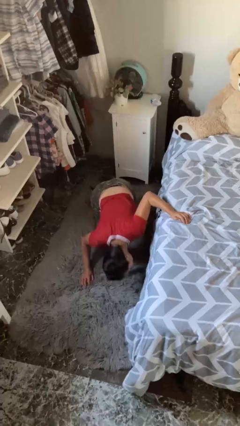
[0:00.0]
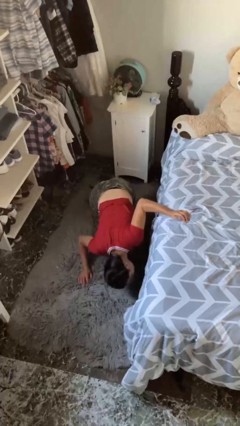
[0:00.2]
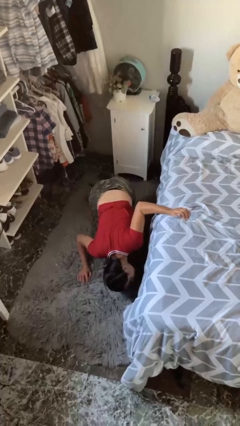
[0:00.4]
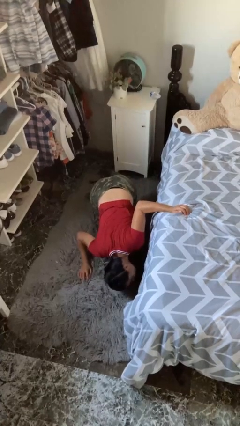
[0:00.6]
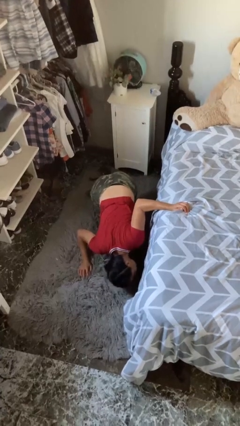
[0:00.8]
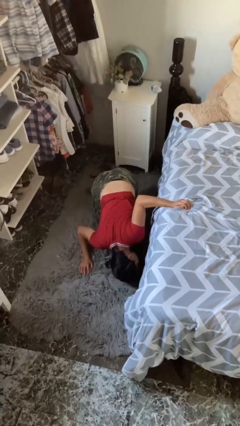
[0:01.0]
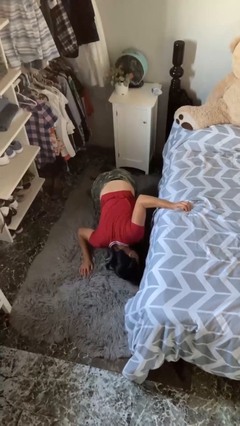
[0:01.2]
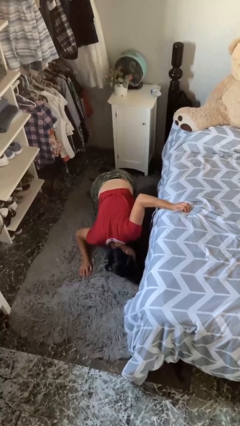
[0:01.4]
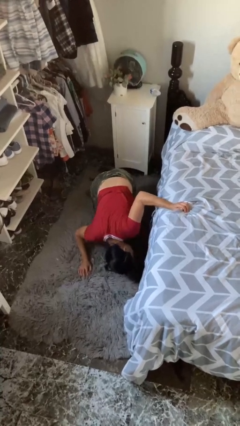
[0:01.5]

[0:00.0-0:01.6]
person searches under bed

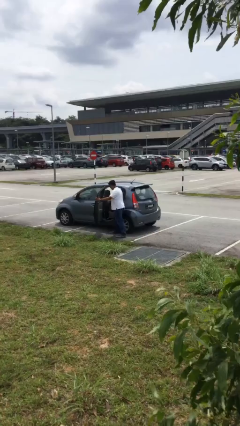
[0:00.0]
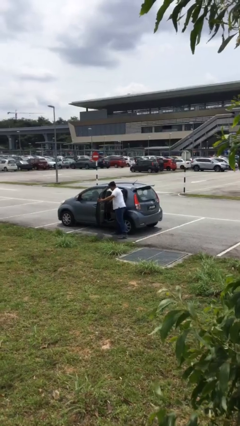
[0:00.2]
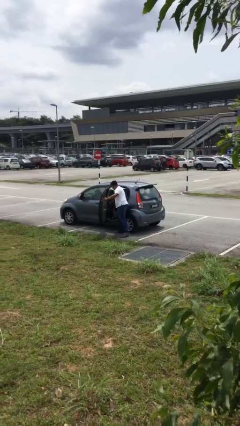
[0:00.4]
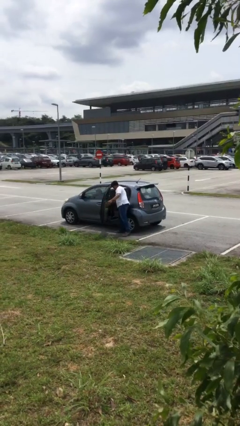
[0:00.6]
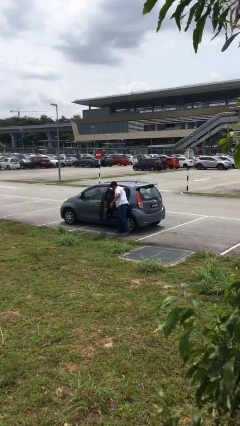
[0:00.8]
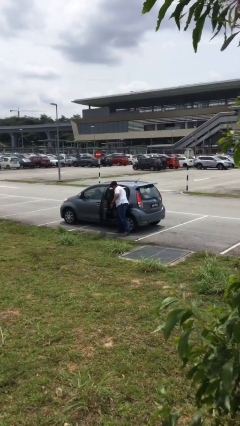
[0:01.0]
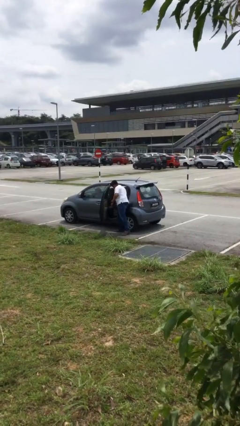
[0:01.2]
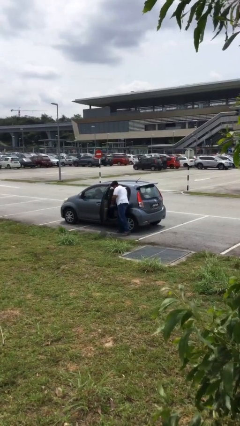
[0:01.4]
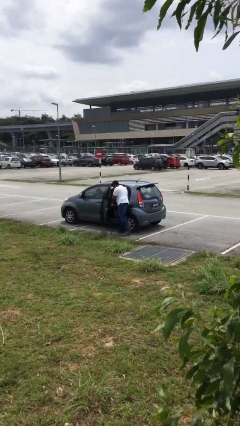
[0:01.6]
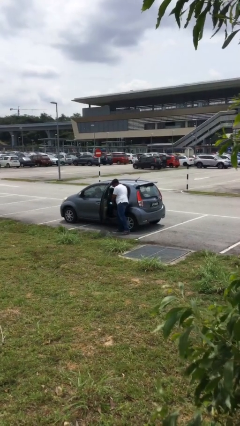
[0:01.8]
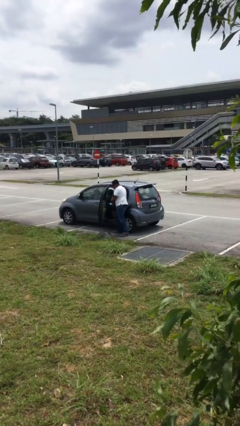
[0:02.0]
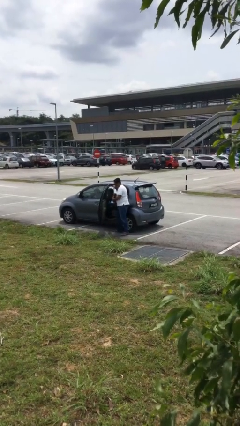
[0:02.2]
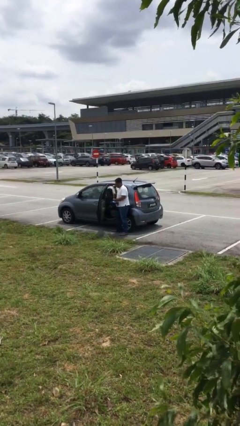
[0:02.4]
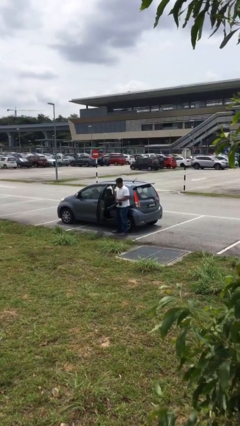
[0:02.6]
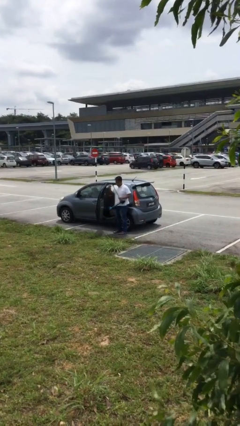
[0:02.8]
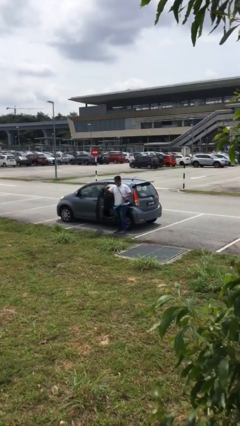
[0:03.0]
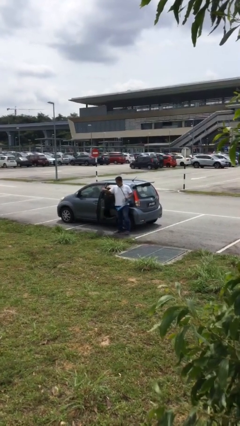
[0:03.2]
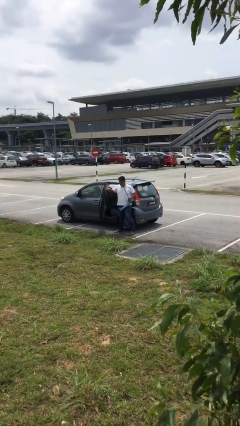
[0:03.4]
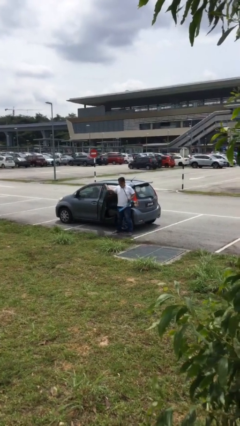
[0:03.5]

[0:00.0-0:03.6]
person unloads car

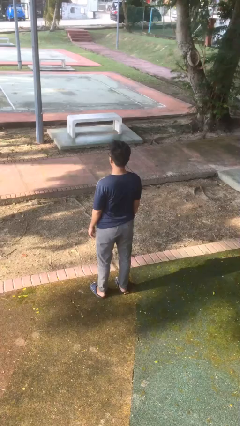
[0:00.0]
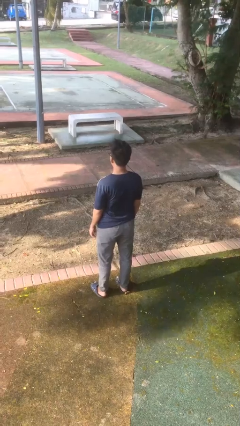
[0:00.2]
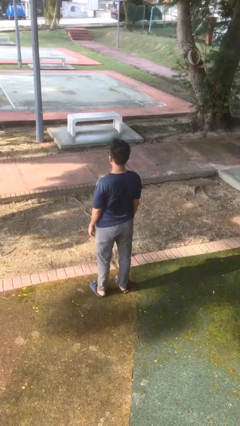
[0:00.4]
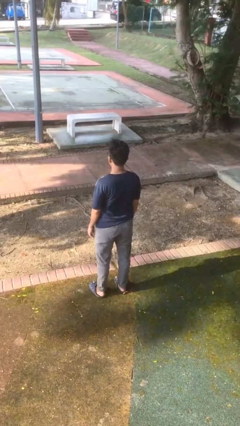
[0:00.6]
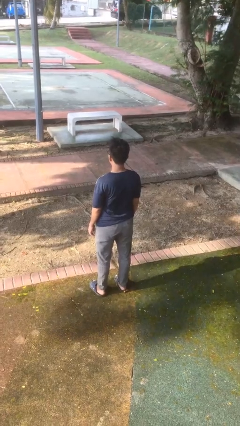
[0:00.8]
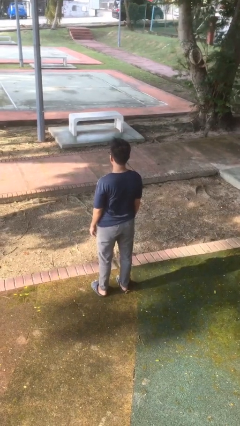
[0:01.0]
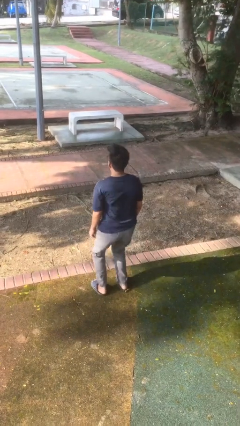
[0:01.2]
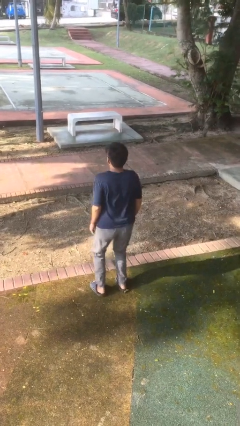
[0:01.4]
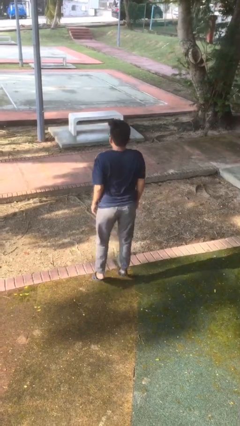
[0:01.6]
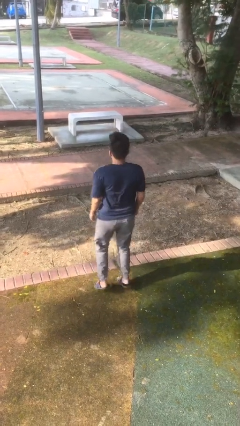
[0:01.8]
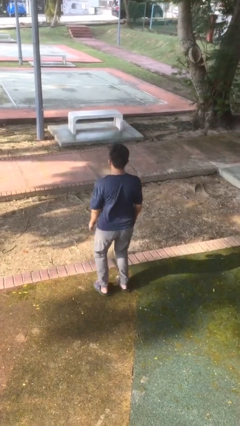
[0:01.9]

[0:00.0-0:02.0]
person jumps

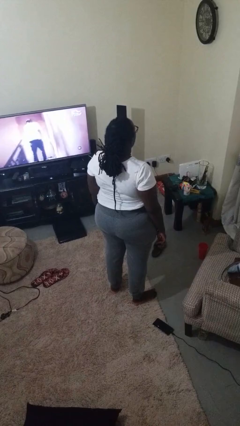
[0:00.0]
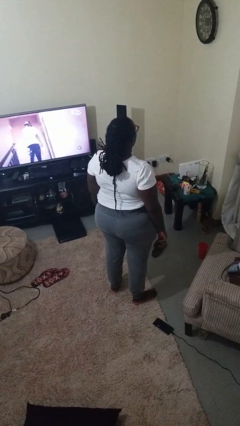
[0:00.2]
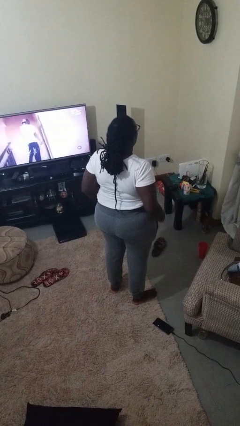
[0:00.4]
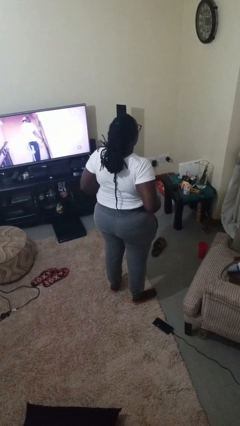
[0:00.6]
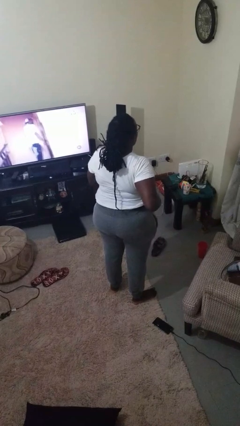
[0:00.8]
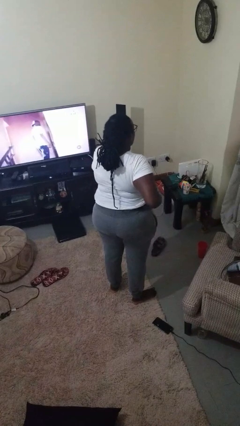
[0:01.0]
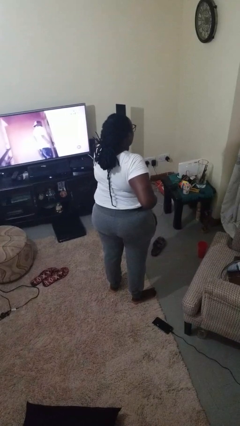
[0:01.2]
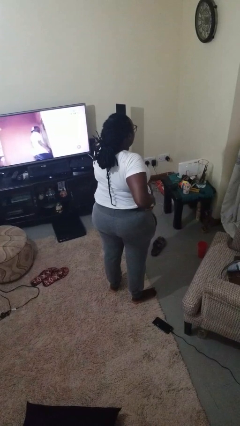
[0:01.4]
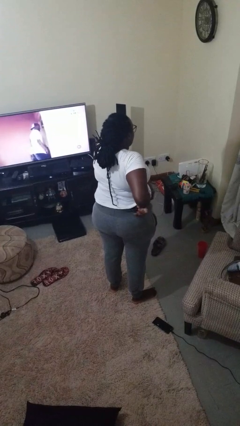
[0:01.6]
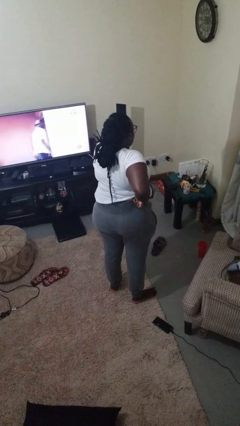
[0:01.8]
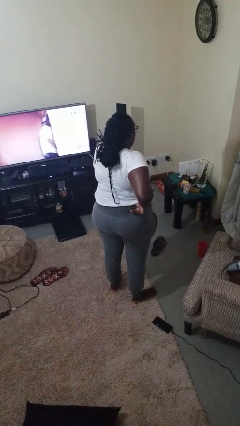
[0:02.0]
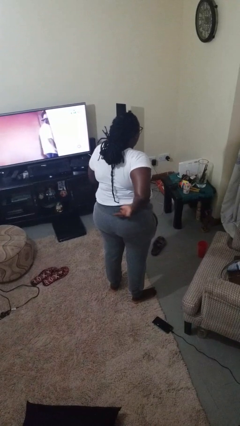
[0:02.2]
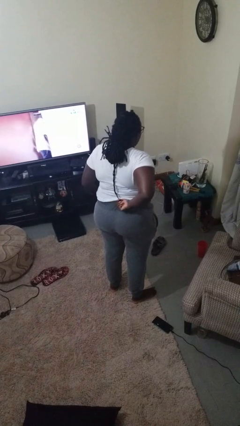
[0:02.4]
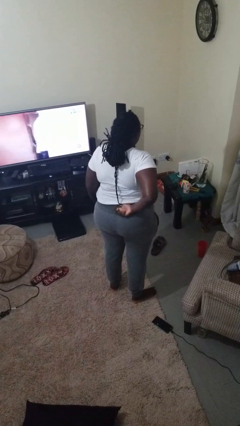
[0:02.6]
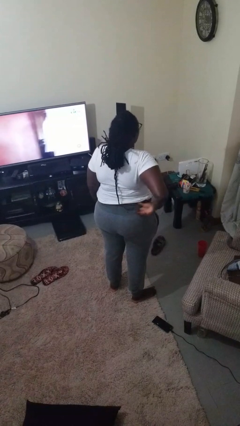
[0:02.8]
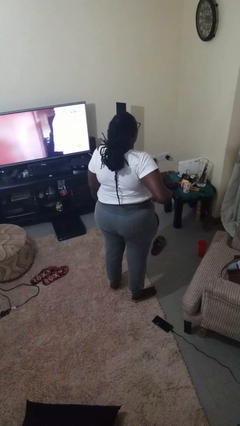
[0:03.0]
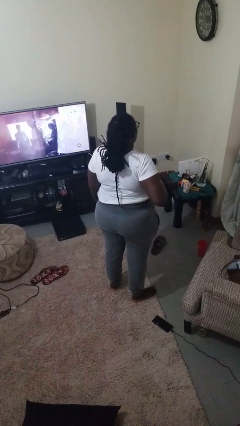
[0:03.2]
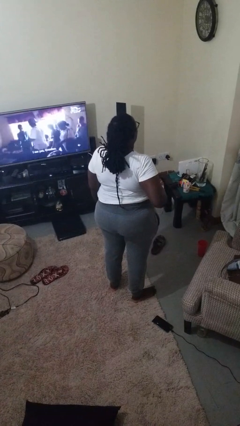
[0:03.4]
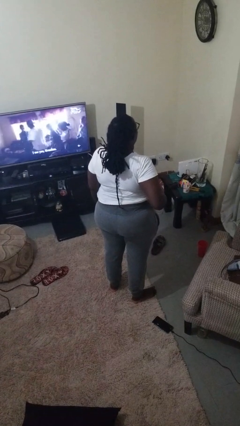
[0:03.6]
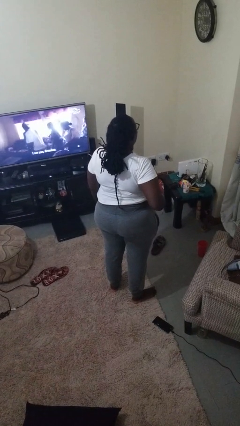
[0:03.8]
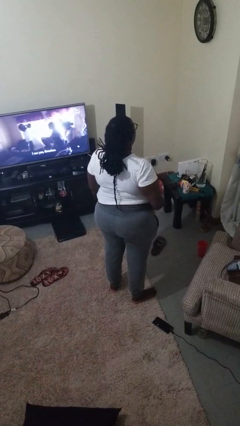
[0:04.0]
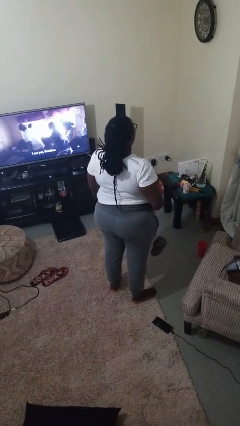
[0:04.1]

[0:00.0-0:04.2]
person hikes up pants

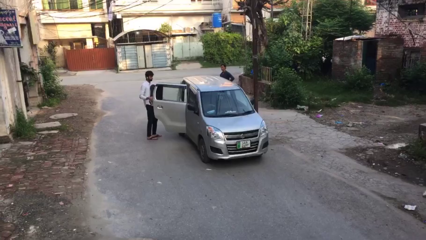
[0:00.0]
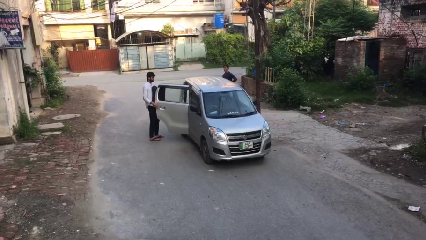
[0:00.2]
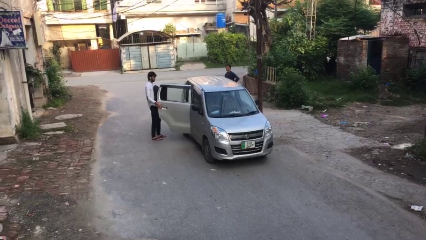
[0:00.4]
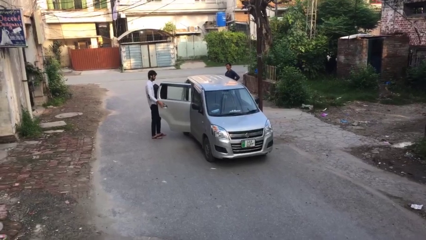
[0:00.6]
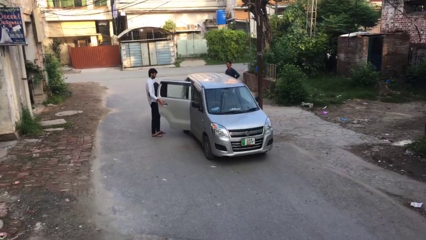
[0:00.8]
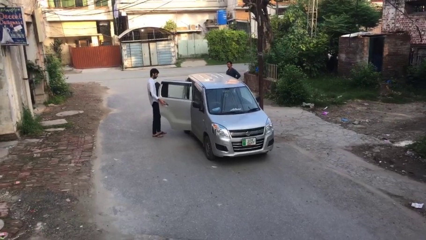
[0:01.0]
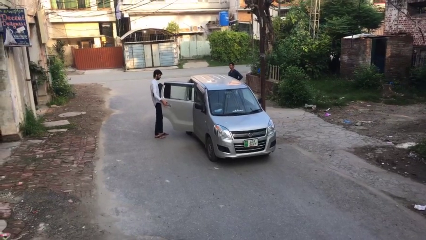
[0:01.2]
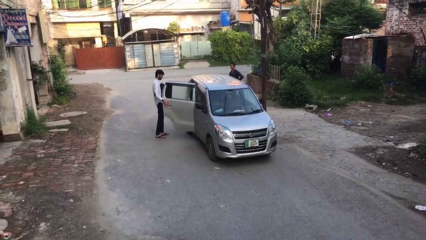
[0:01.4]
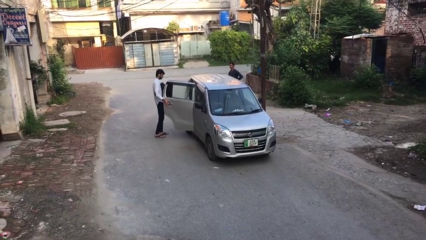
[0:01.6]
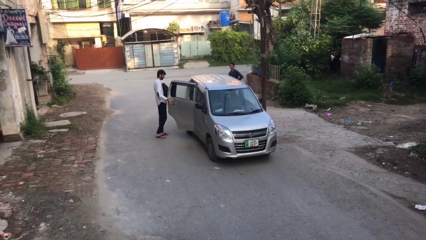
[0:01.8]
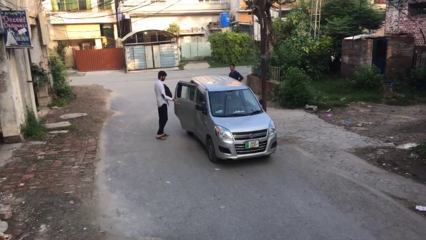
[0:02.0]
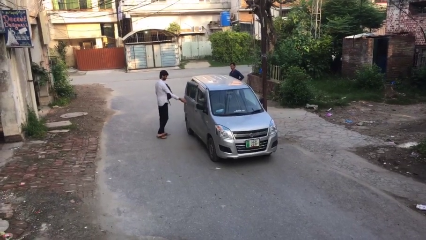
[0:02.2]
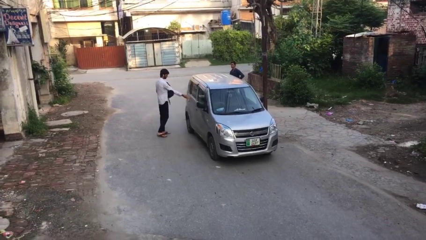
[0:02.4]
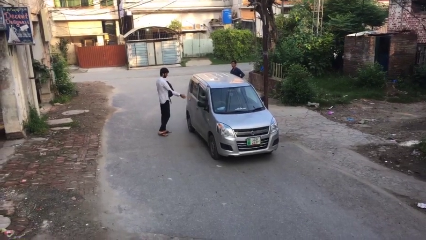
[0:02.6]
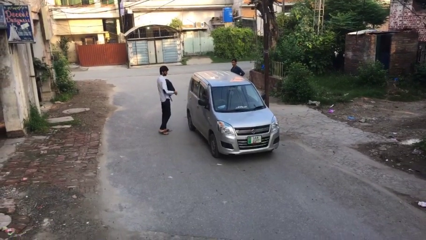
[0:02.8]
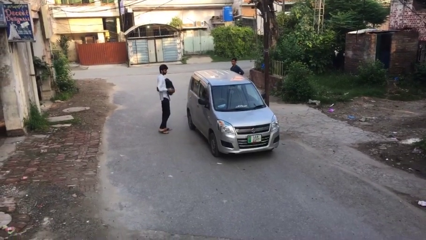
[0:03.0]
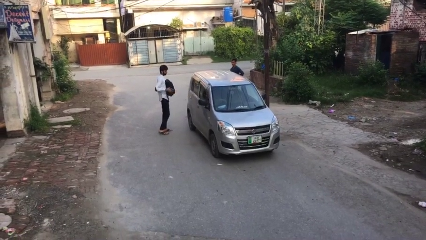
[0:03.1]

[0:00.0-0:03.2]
person closes car door

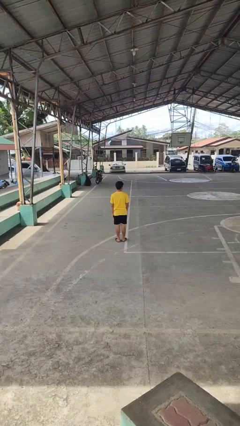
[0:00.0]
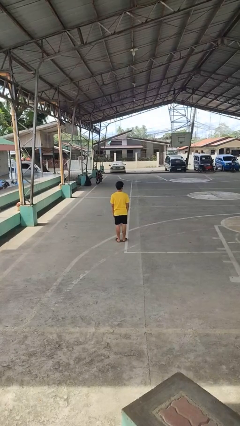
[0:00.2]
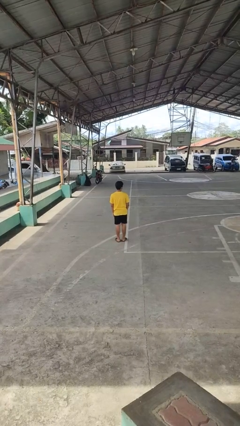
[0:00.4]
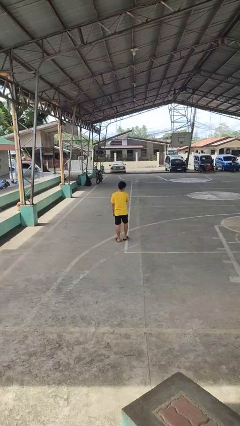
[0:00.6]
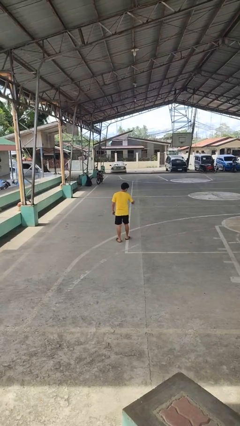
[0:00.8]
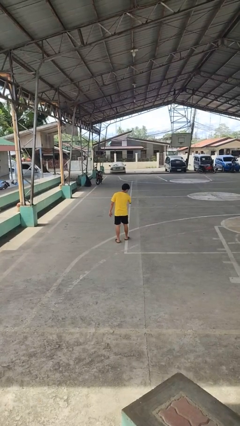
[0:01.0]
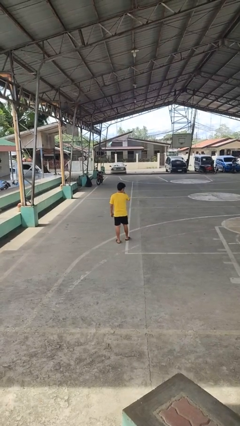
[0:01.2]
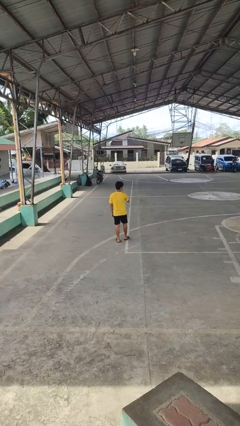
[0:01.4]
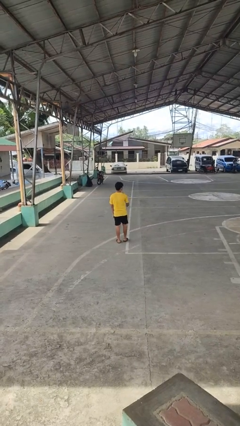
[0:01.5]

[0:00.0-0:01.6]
person karate chop

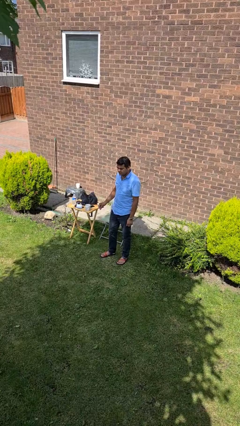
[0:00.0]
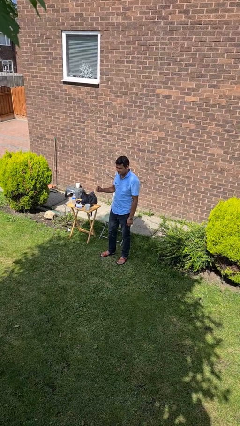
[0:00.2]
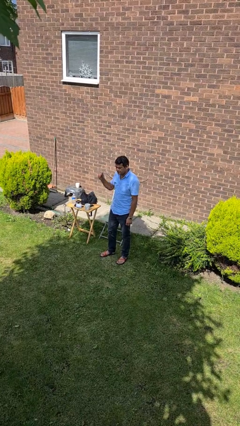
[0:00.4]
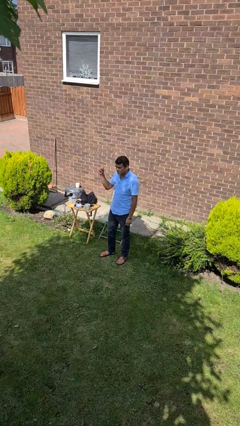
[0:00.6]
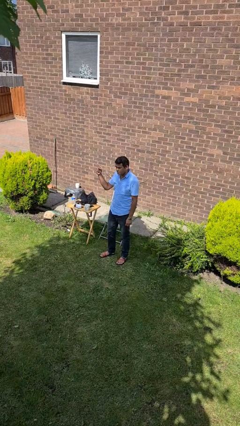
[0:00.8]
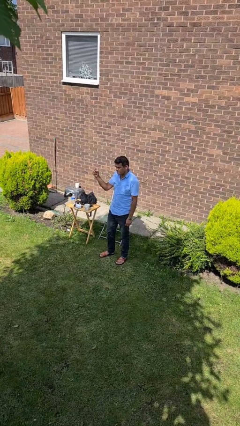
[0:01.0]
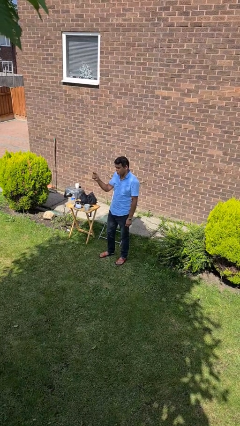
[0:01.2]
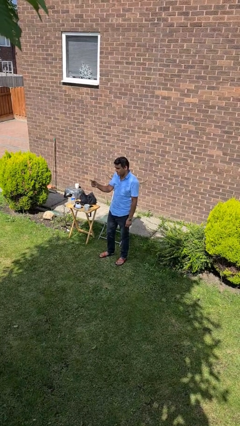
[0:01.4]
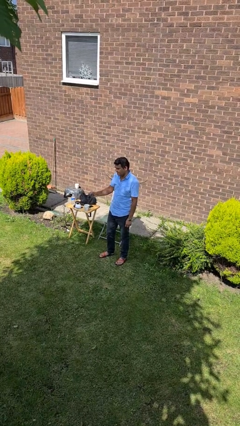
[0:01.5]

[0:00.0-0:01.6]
person snaps fingers
